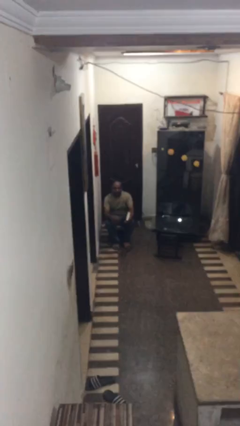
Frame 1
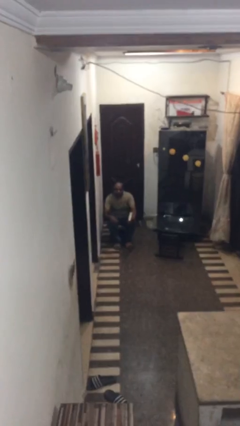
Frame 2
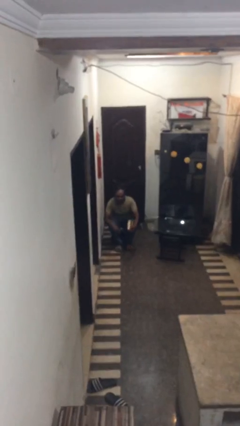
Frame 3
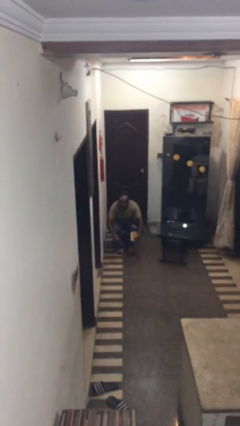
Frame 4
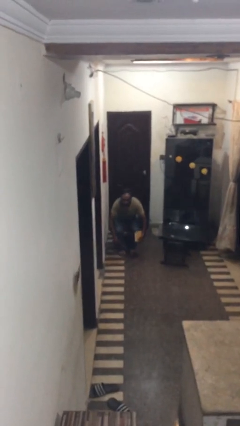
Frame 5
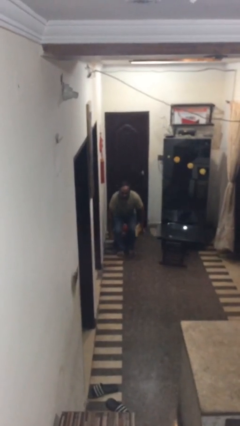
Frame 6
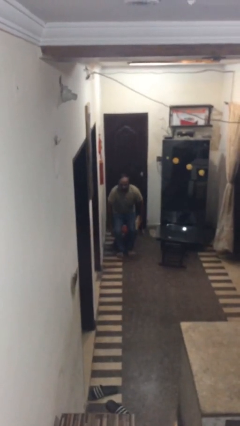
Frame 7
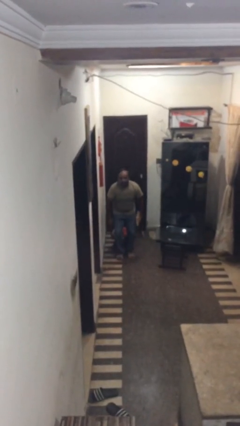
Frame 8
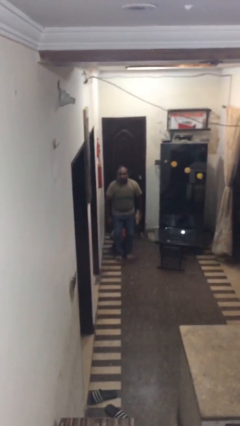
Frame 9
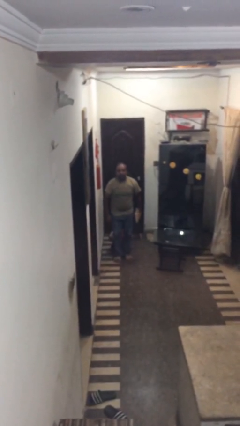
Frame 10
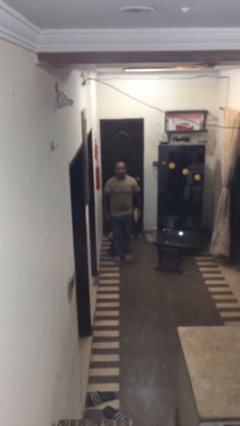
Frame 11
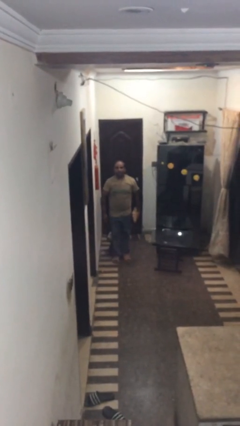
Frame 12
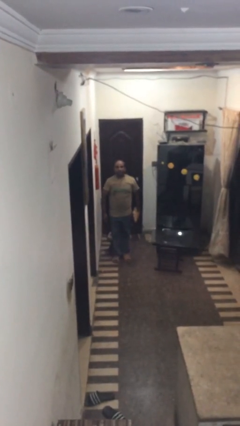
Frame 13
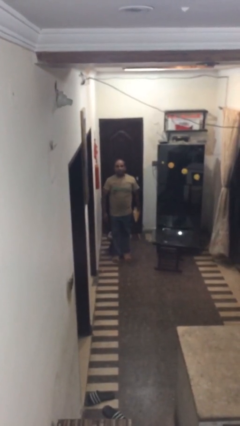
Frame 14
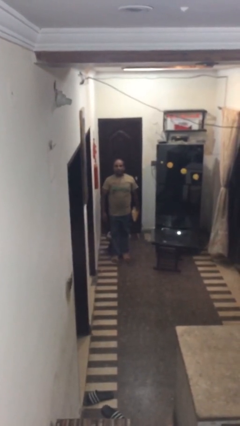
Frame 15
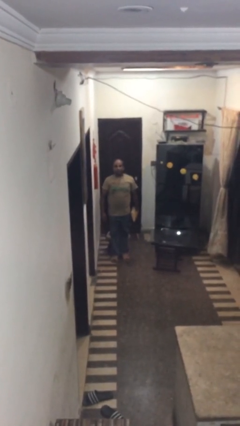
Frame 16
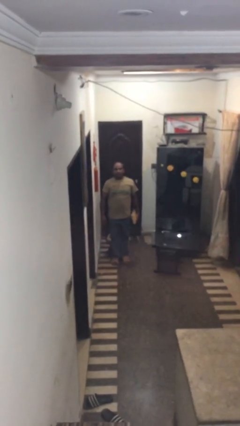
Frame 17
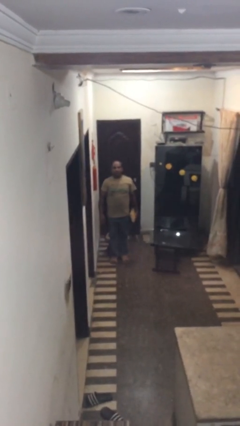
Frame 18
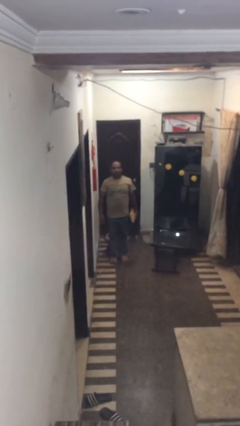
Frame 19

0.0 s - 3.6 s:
person stands up

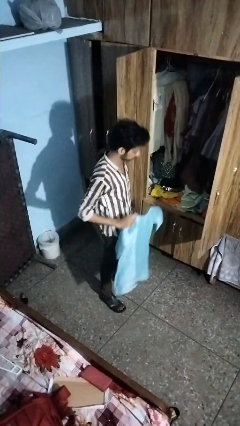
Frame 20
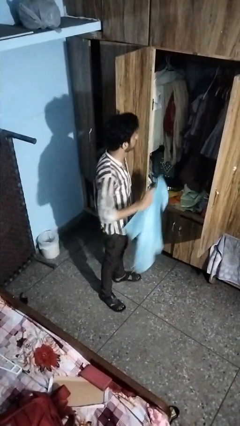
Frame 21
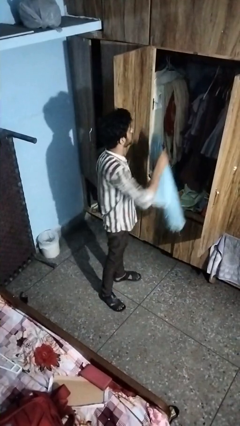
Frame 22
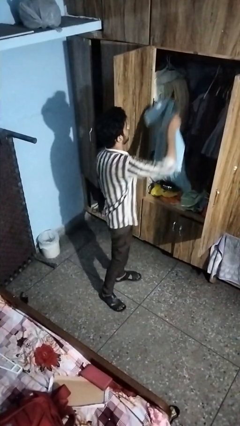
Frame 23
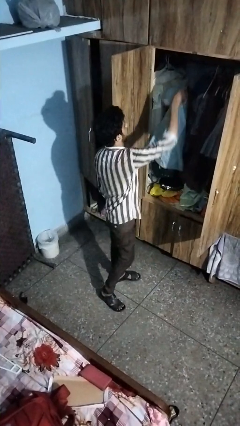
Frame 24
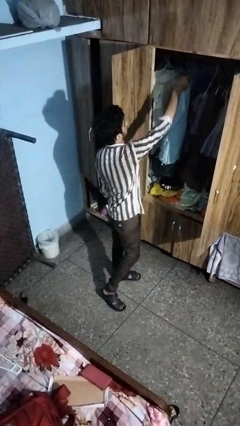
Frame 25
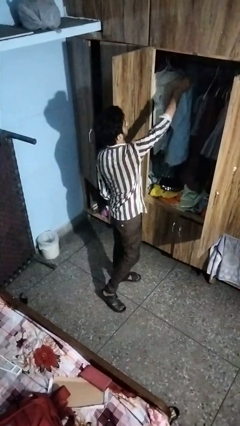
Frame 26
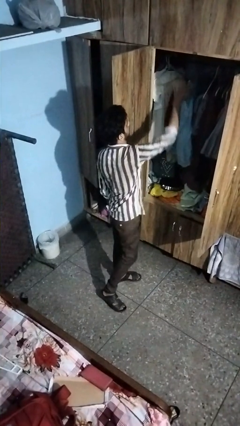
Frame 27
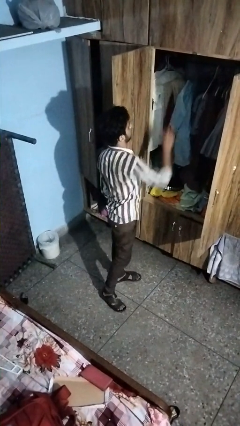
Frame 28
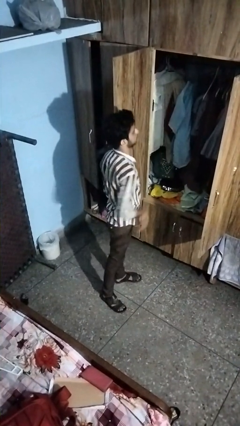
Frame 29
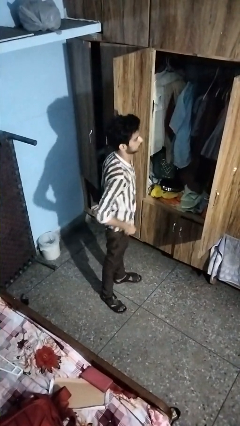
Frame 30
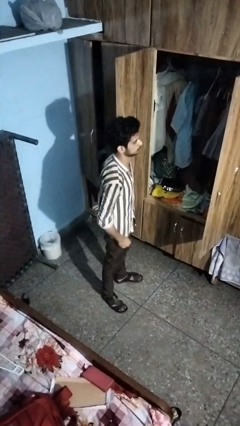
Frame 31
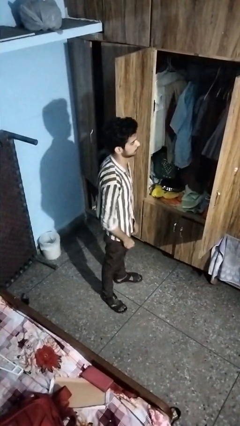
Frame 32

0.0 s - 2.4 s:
person puts clothes into closet

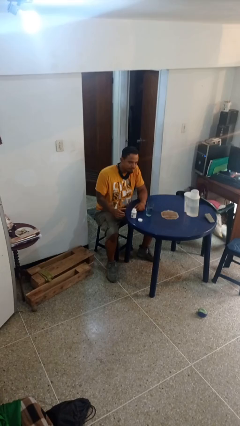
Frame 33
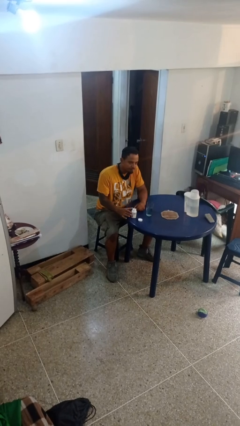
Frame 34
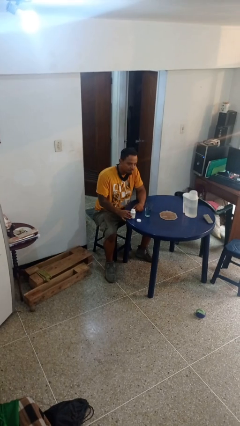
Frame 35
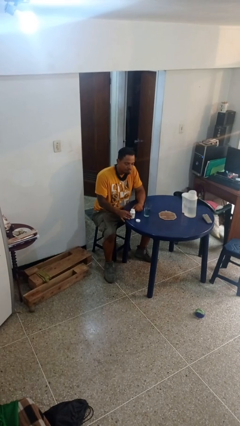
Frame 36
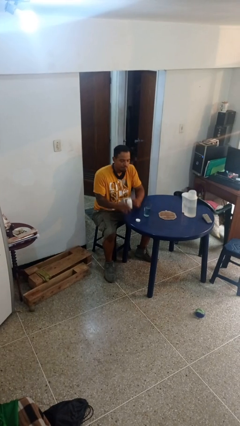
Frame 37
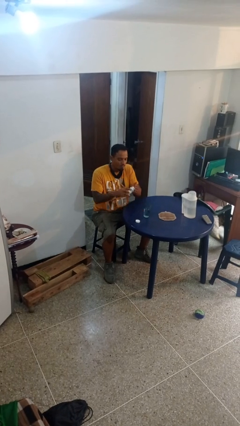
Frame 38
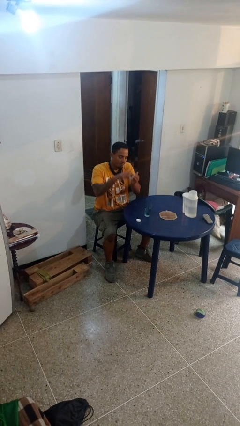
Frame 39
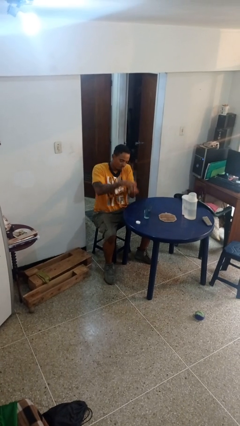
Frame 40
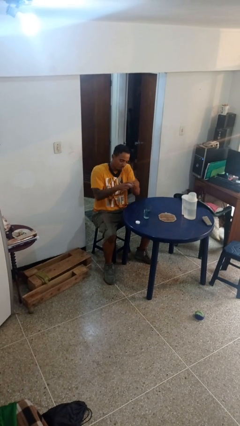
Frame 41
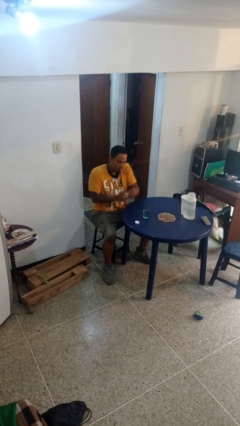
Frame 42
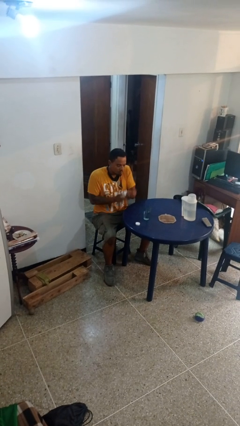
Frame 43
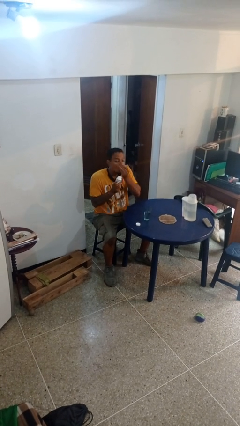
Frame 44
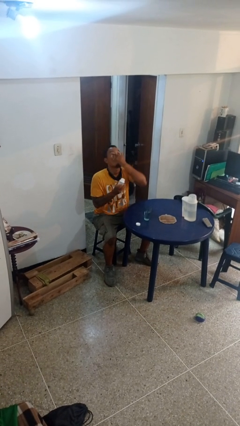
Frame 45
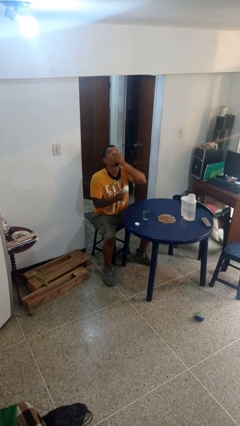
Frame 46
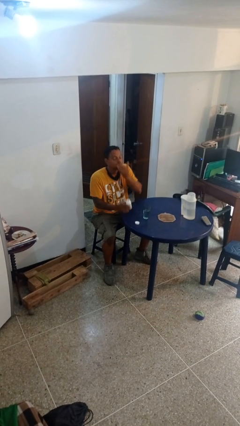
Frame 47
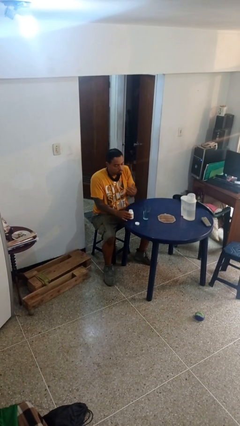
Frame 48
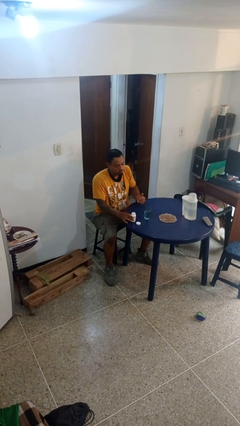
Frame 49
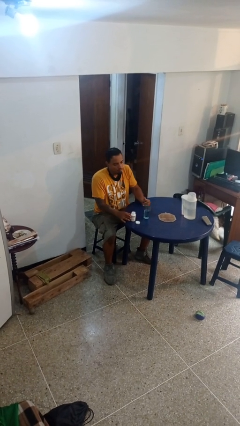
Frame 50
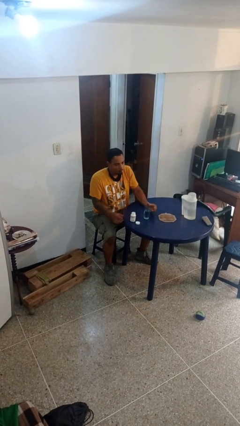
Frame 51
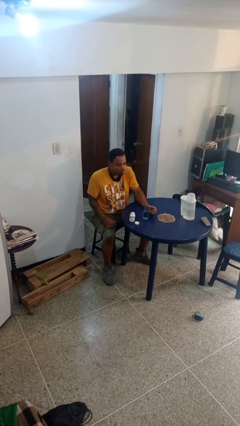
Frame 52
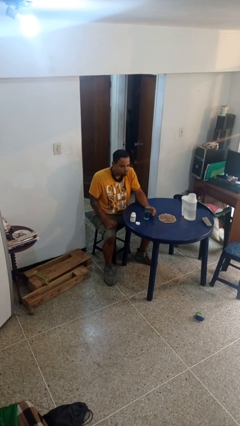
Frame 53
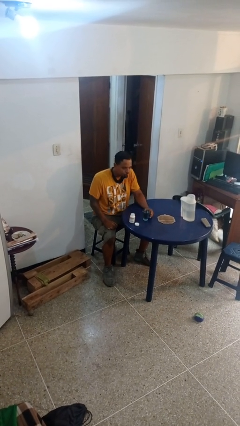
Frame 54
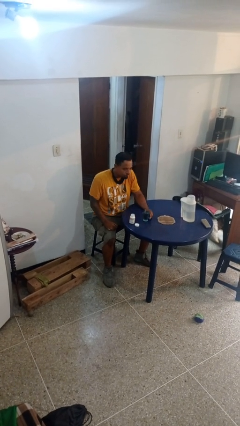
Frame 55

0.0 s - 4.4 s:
person takes medicine pills

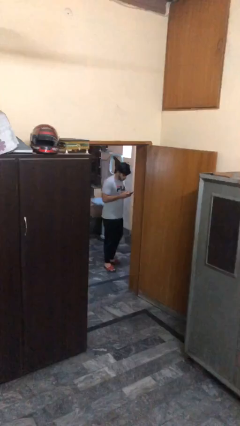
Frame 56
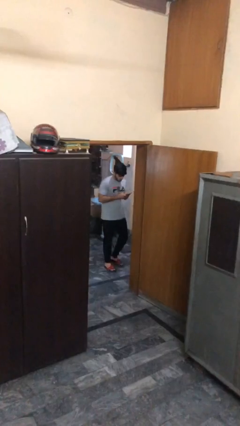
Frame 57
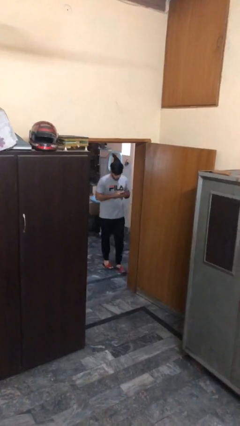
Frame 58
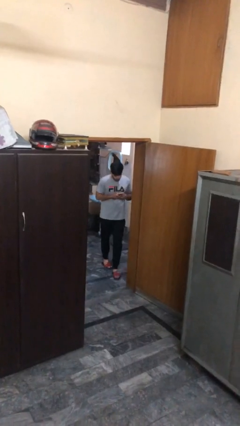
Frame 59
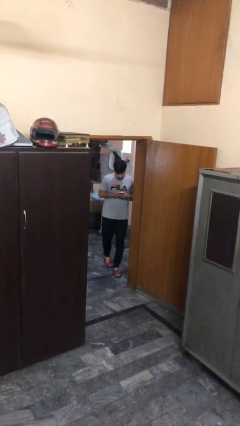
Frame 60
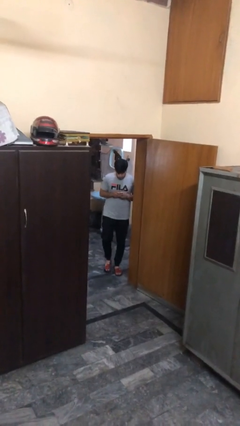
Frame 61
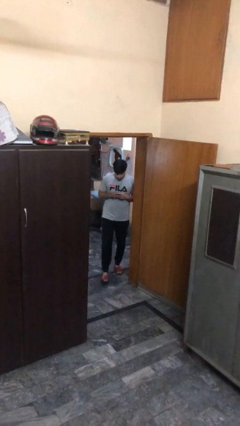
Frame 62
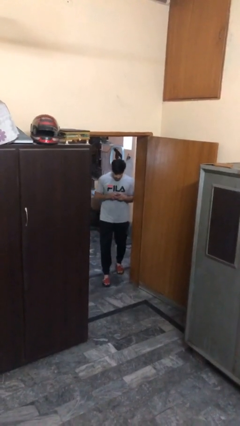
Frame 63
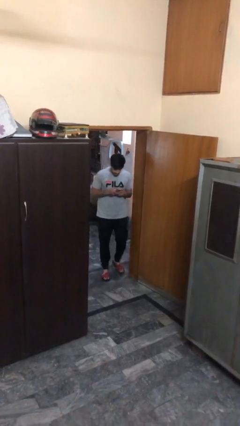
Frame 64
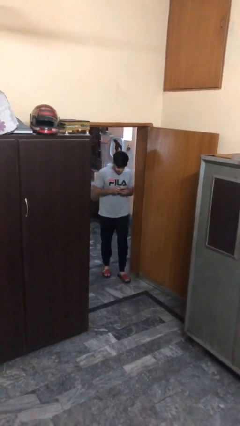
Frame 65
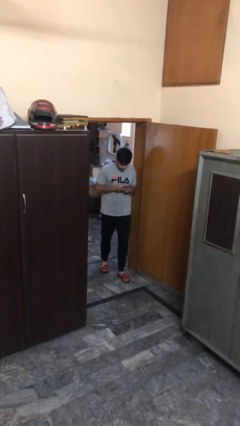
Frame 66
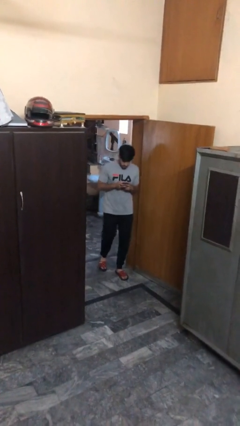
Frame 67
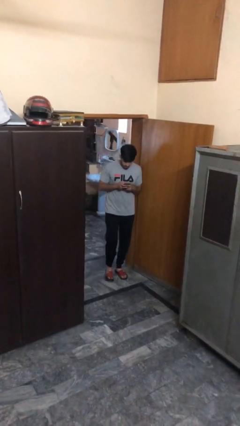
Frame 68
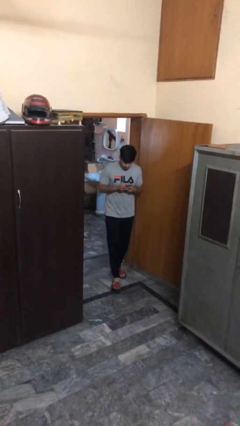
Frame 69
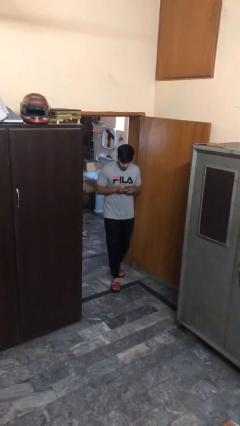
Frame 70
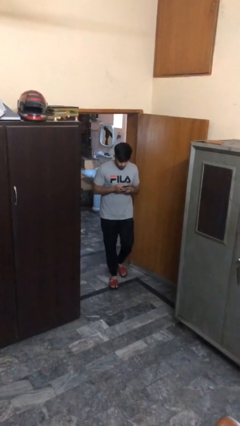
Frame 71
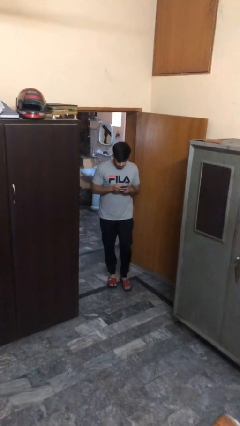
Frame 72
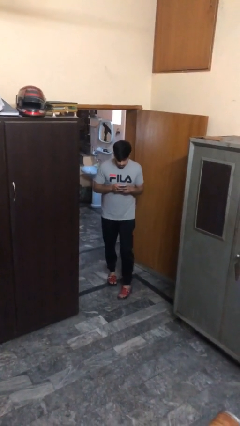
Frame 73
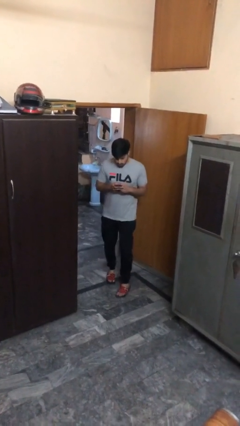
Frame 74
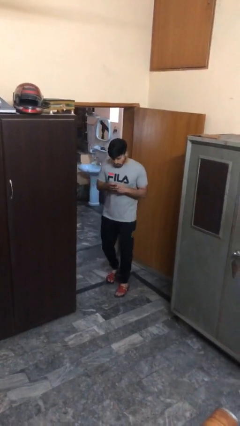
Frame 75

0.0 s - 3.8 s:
person enters scene through structure

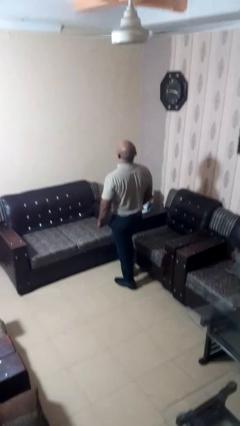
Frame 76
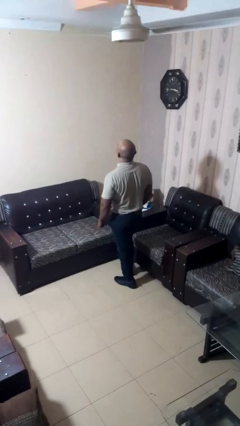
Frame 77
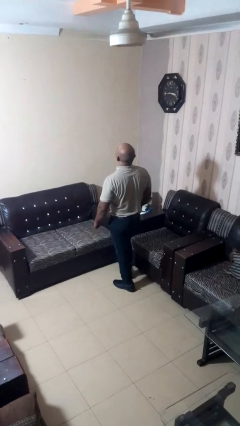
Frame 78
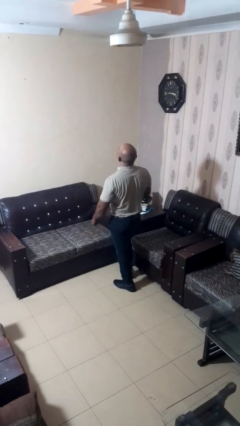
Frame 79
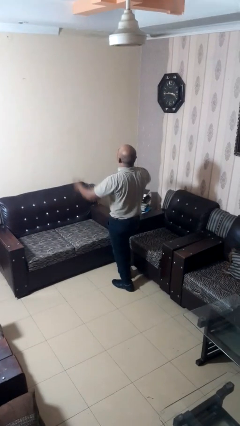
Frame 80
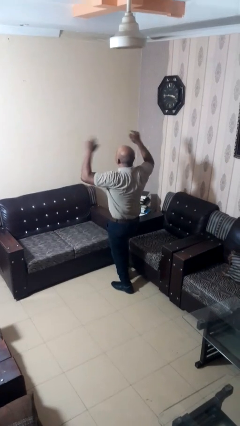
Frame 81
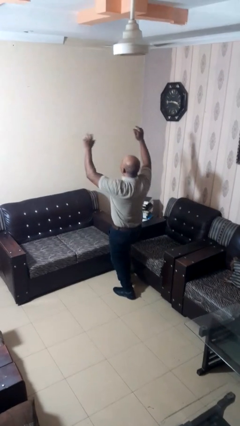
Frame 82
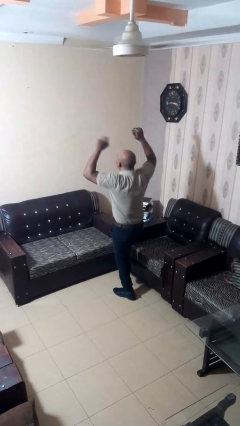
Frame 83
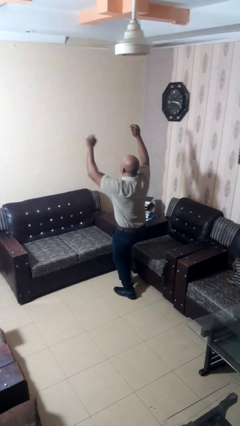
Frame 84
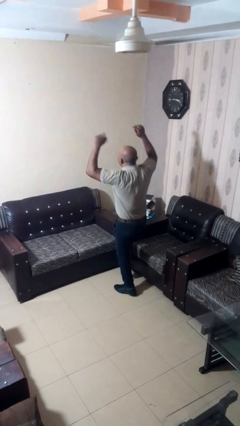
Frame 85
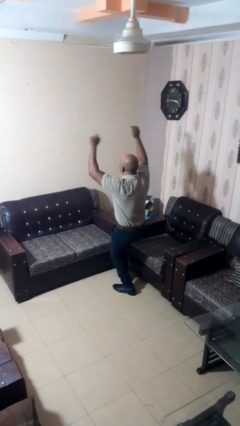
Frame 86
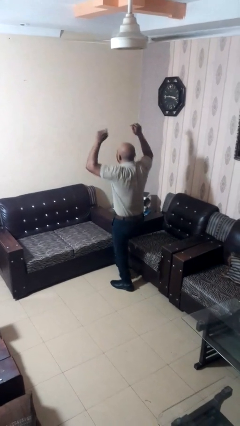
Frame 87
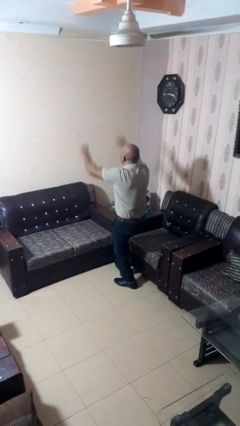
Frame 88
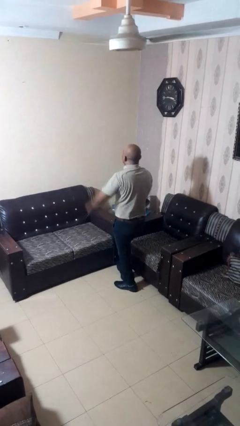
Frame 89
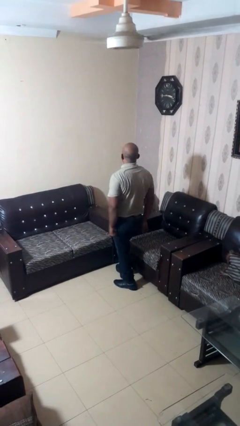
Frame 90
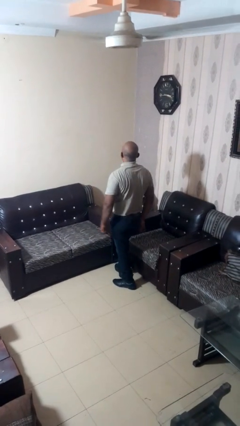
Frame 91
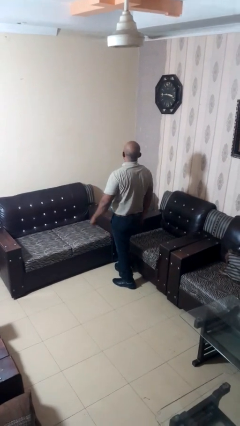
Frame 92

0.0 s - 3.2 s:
person dances in place
